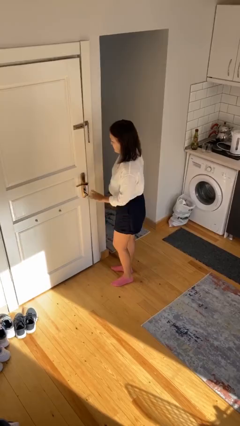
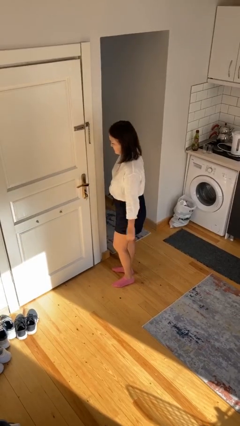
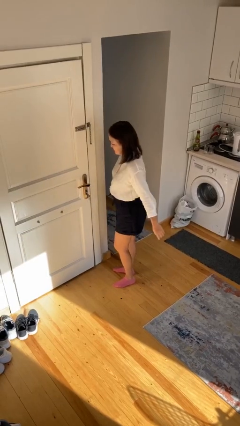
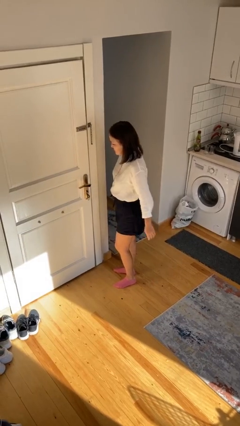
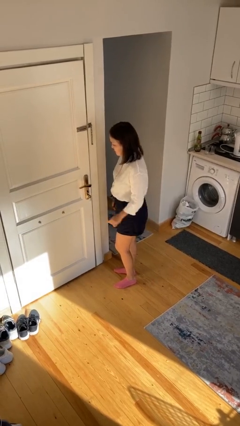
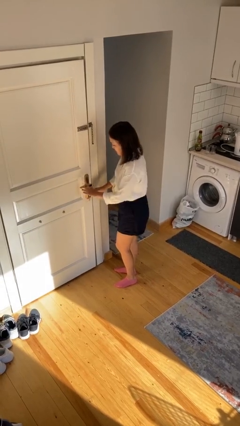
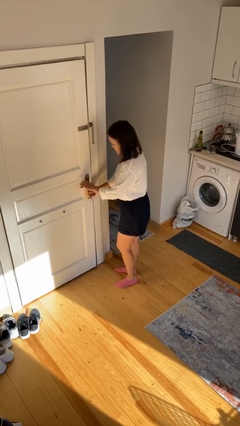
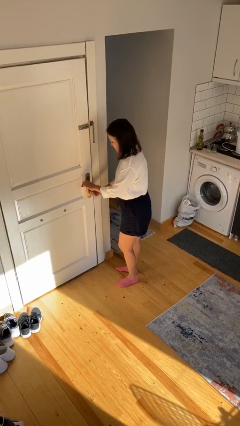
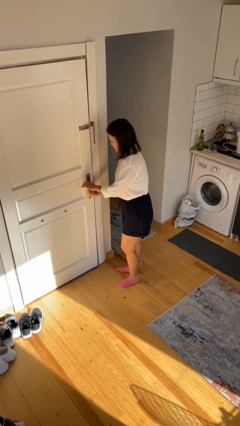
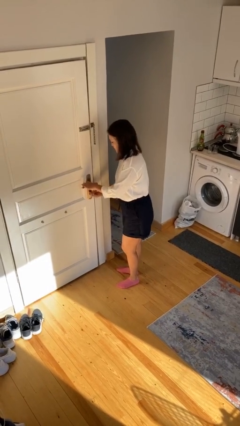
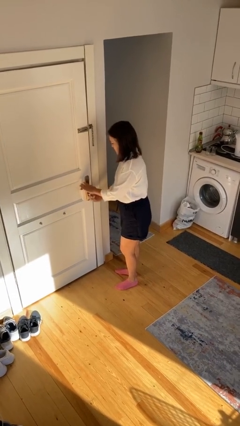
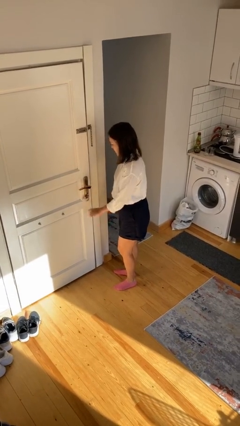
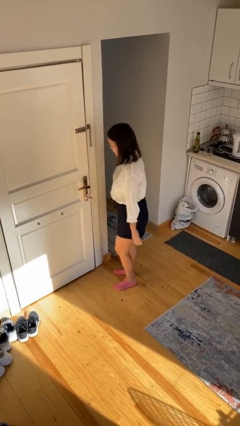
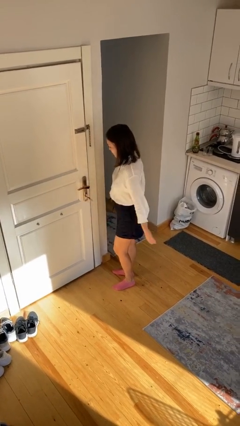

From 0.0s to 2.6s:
person locks door with keys

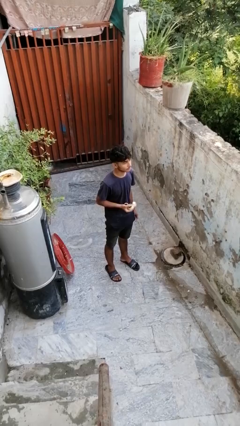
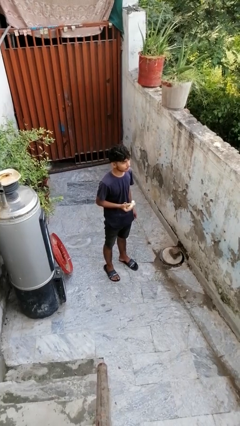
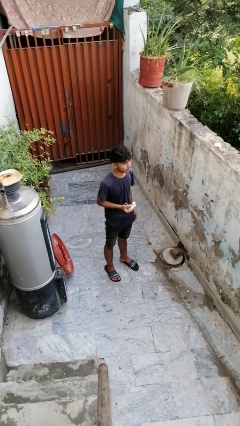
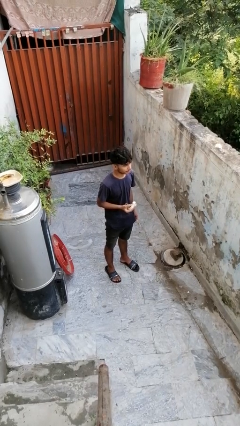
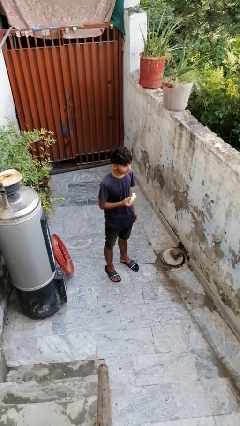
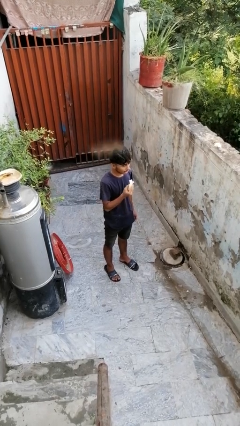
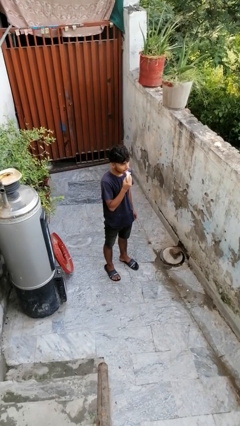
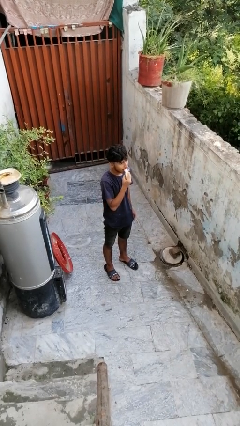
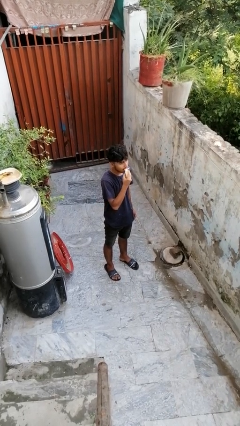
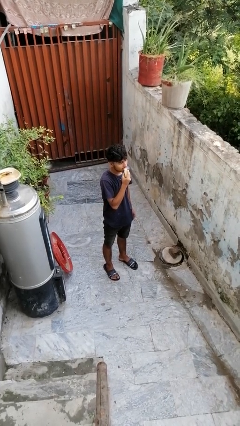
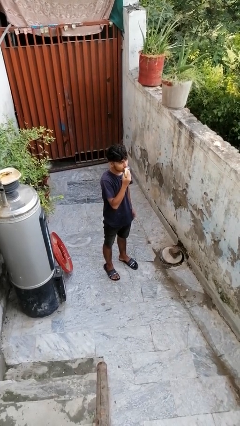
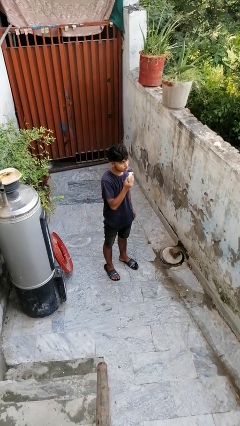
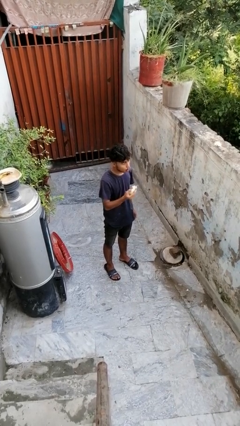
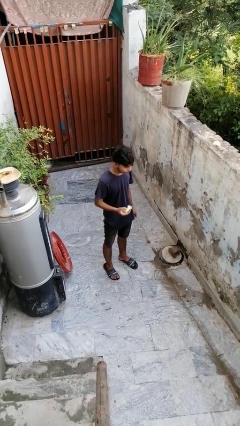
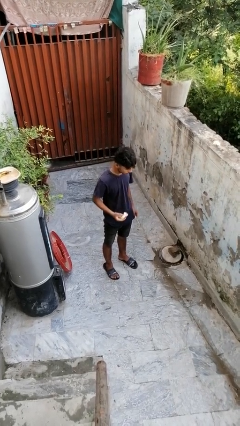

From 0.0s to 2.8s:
person eats banana

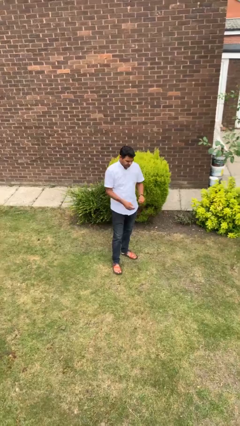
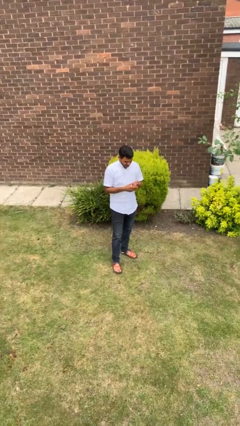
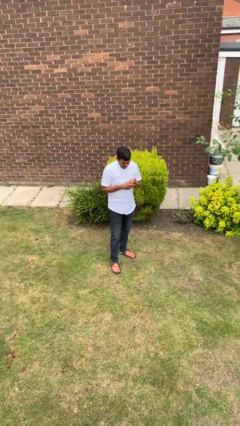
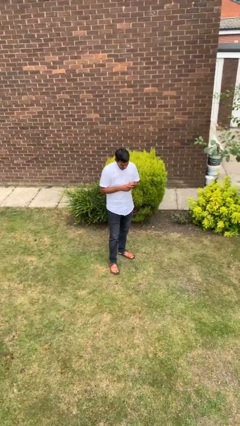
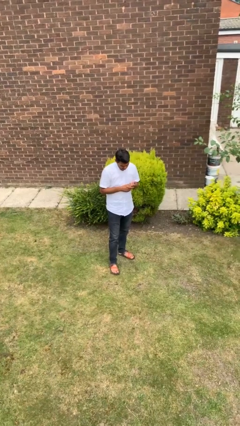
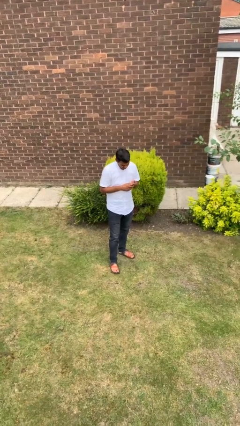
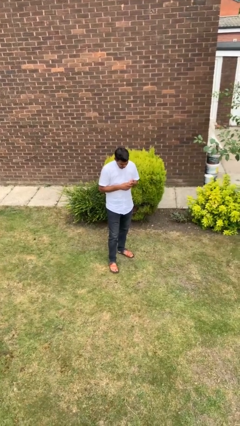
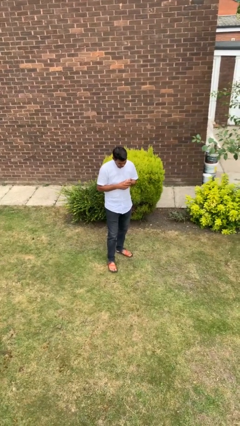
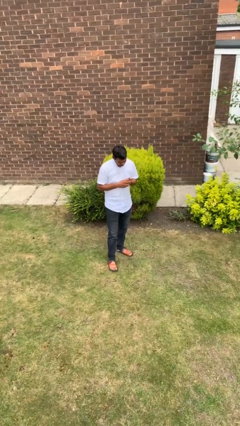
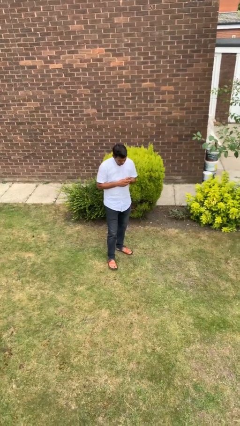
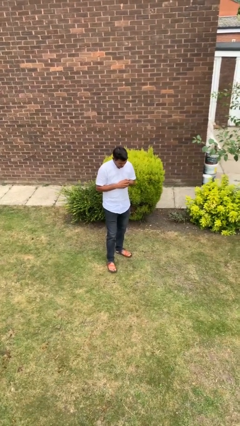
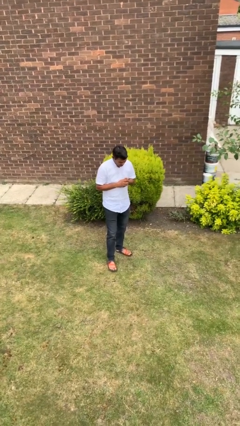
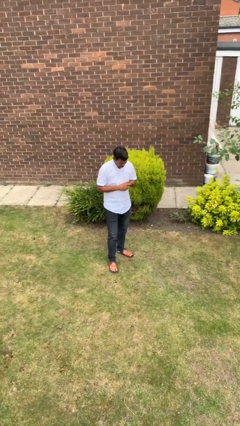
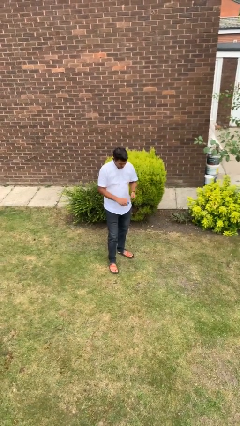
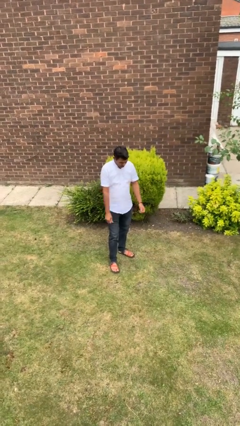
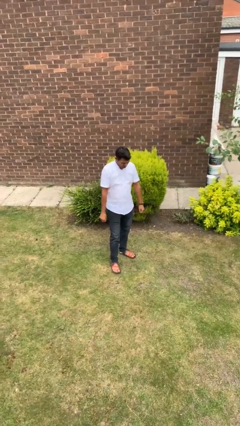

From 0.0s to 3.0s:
person cracks knuckles

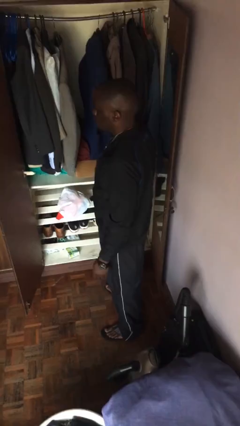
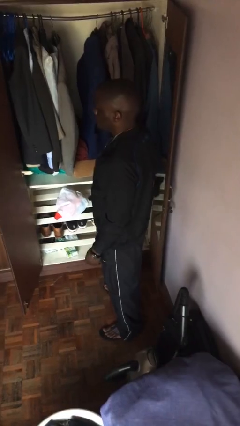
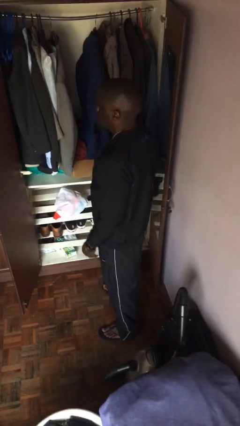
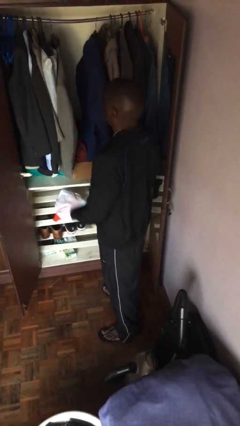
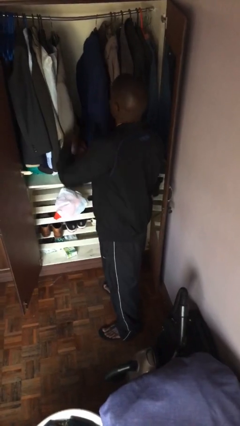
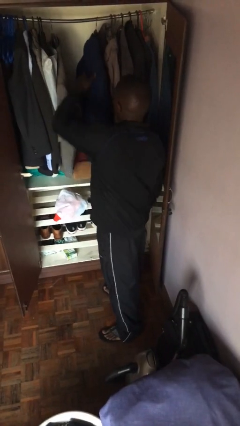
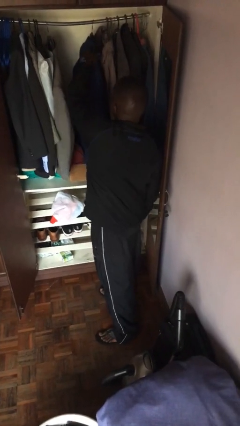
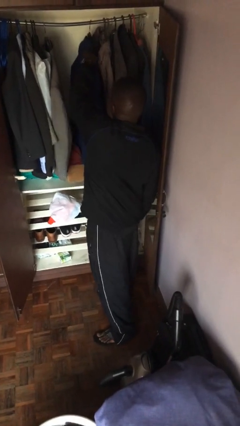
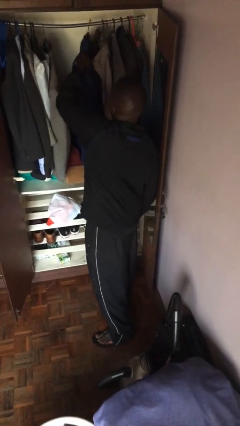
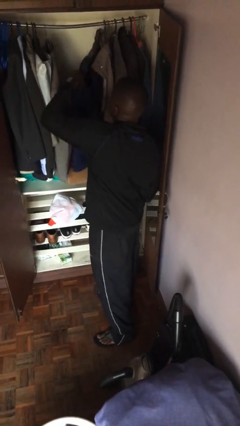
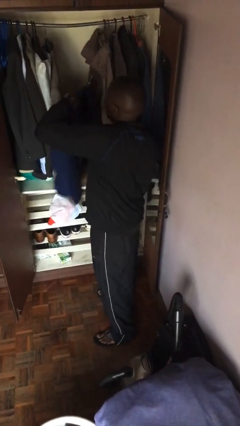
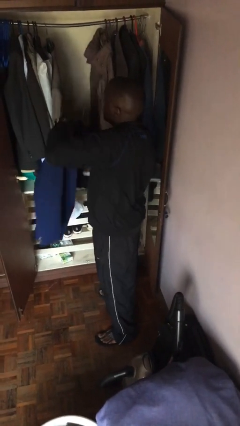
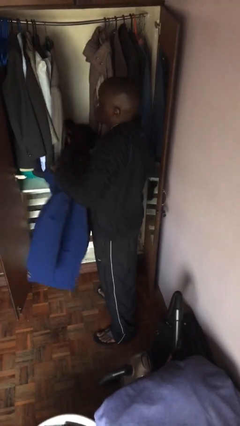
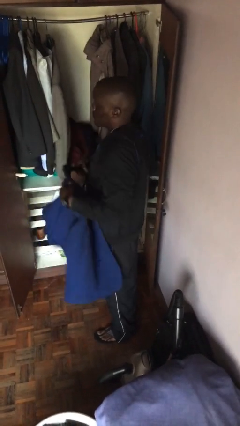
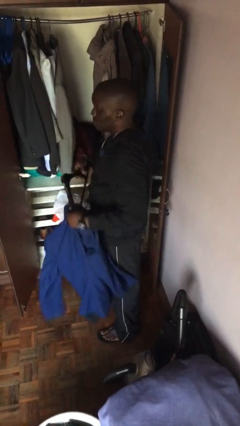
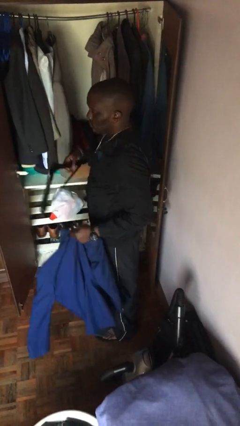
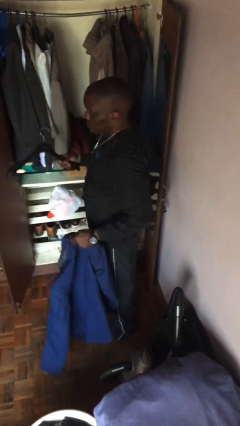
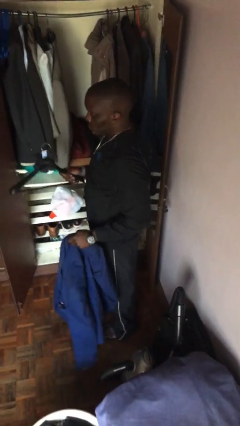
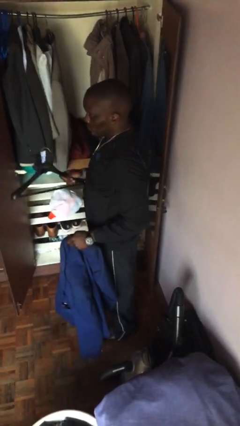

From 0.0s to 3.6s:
person takes clothes from closet

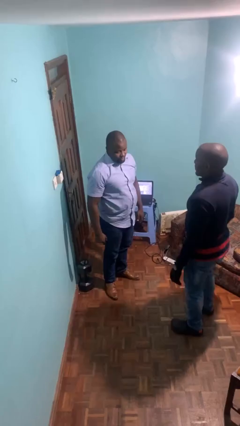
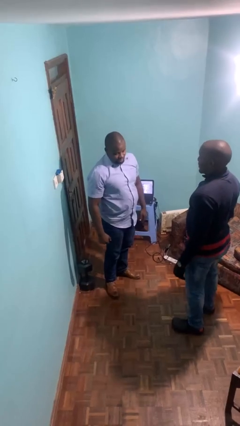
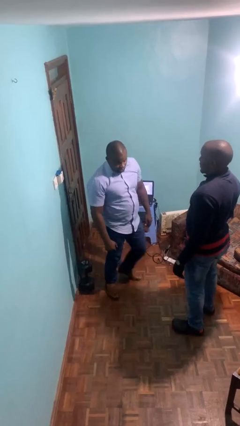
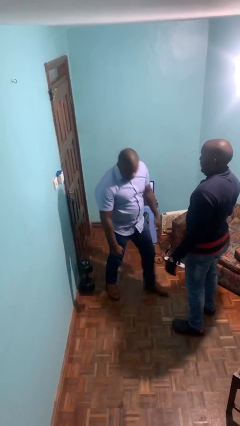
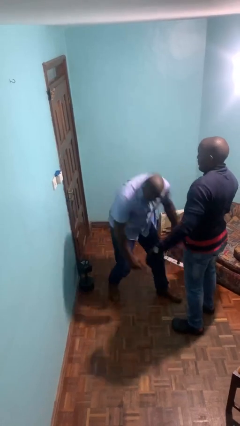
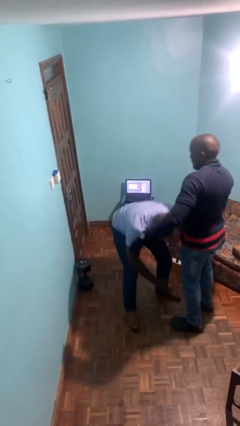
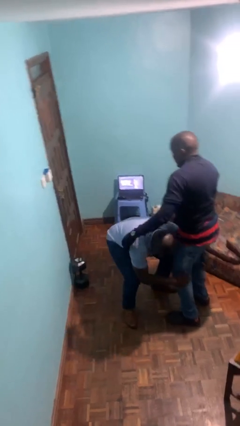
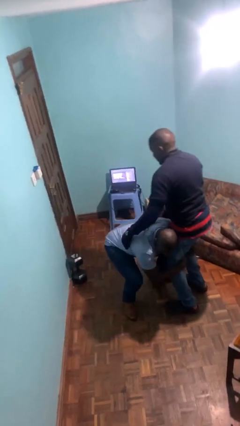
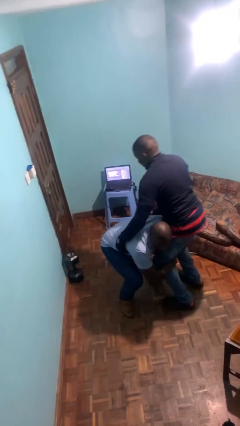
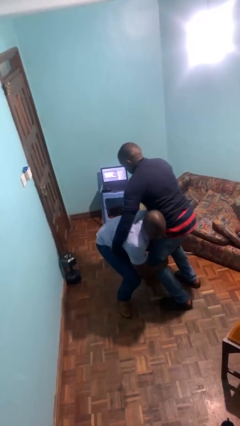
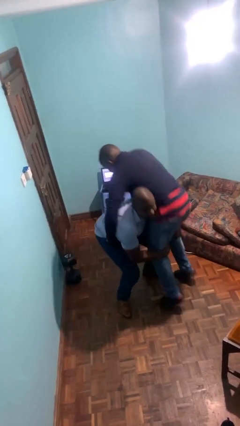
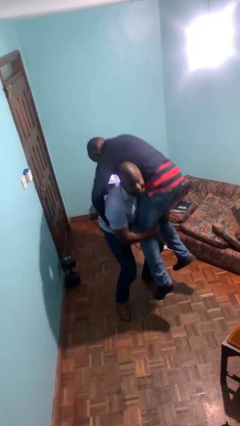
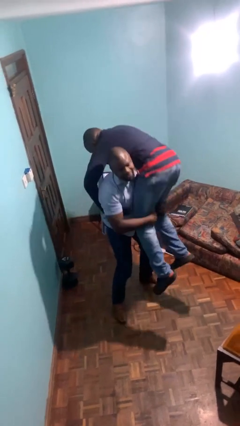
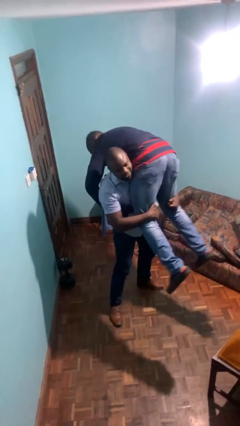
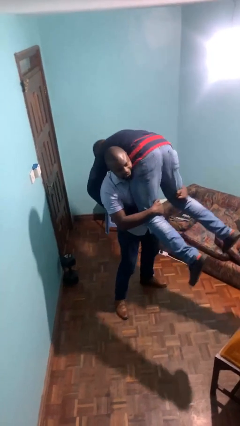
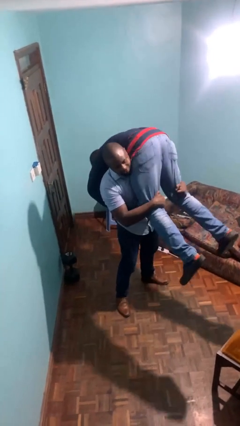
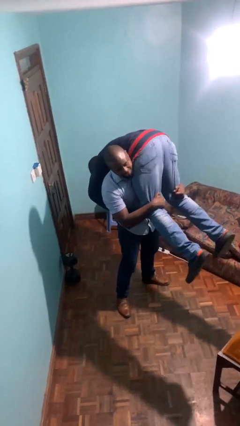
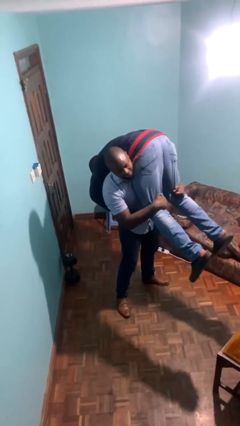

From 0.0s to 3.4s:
person carries person over shoulder

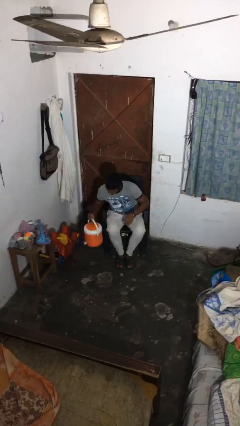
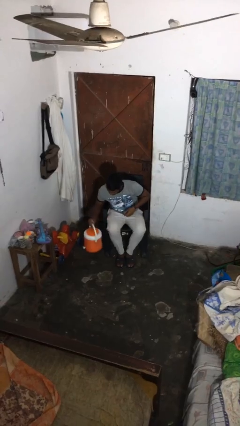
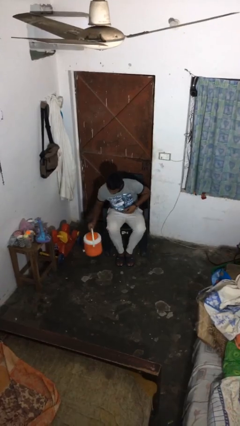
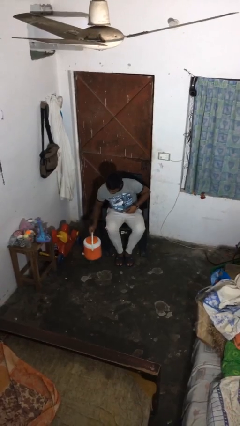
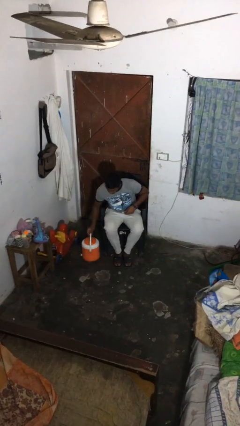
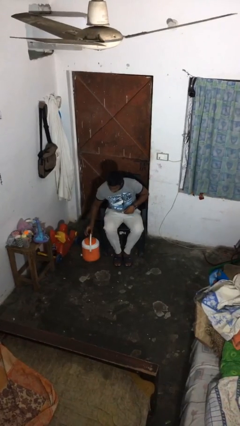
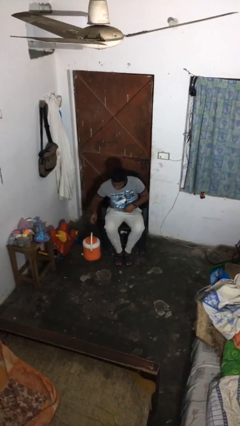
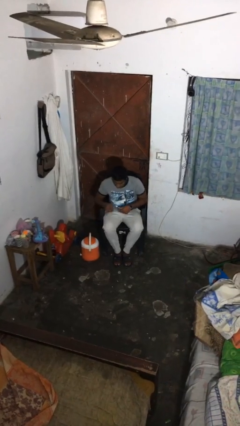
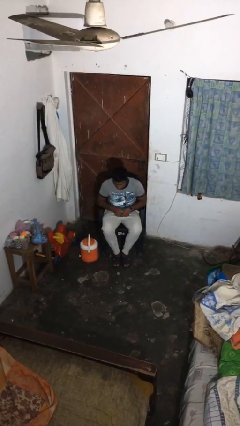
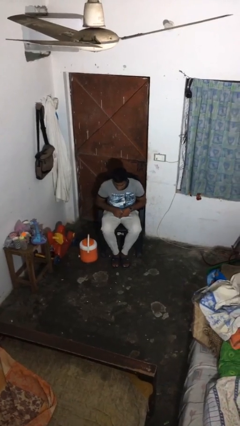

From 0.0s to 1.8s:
person puts down object on floor
